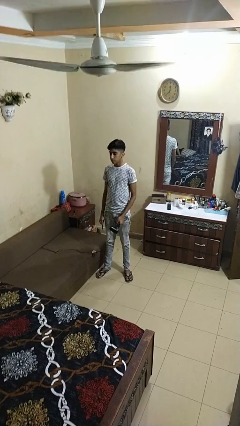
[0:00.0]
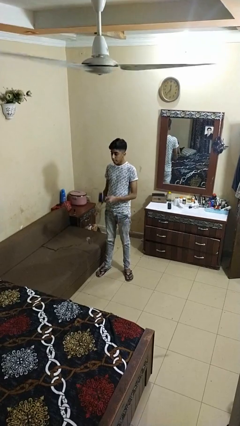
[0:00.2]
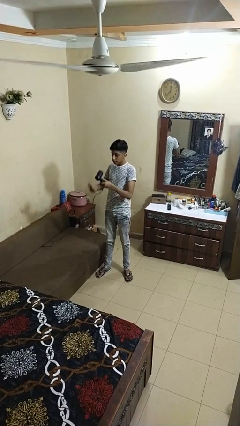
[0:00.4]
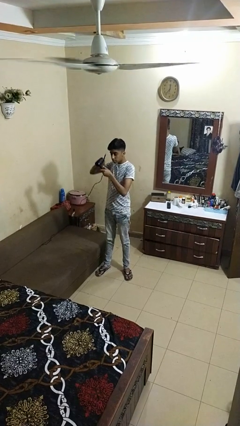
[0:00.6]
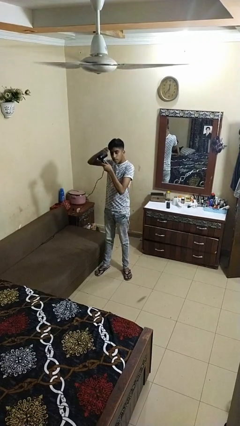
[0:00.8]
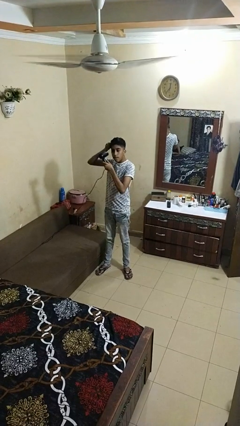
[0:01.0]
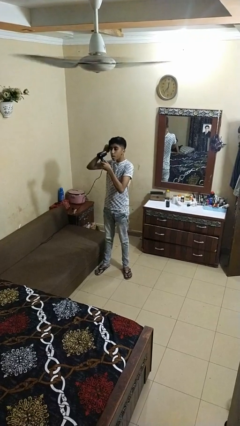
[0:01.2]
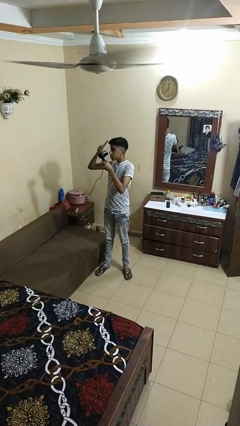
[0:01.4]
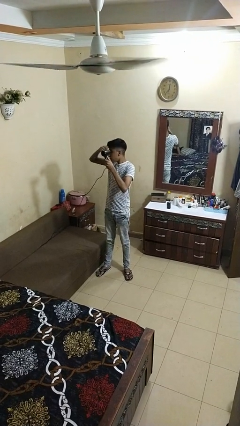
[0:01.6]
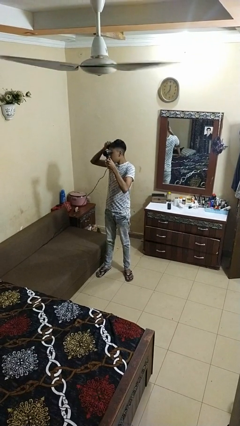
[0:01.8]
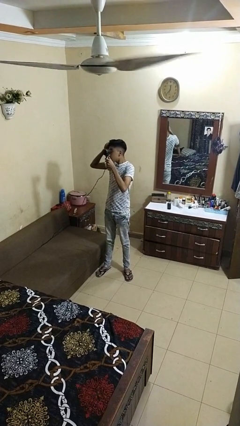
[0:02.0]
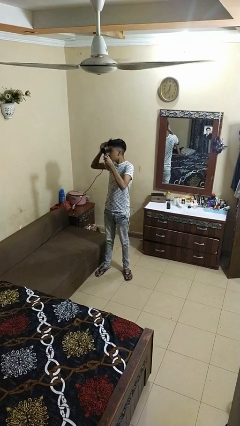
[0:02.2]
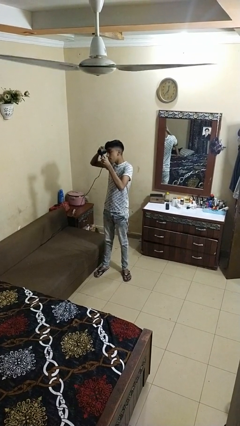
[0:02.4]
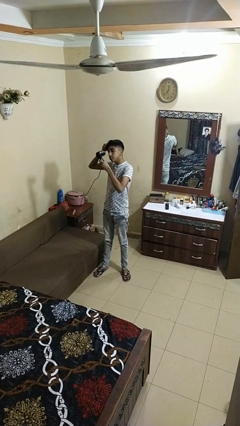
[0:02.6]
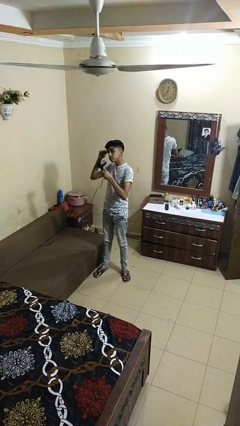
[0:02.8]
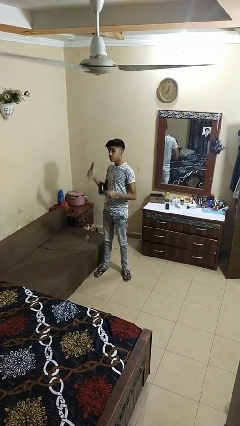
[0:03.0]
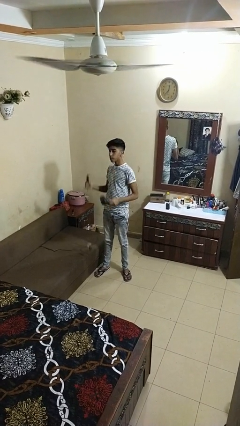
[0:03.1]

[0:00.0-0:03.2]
person dries hair with hairdryer

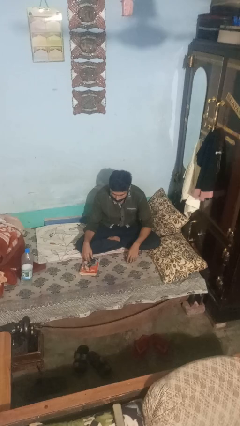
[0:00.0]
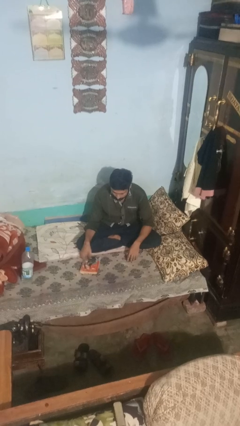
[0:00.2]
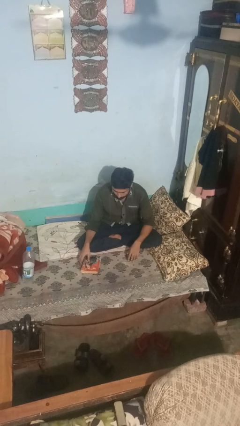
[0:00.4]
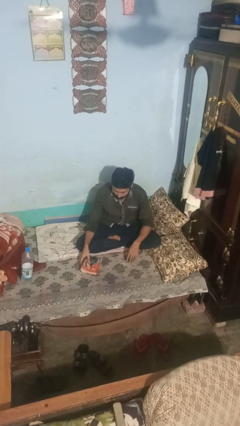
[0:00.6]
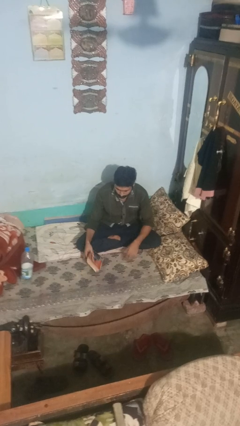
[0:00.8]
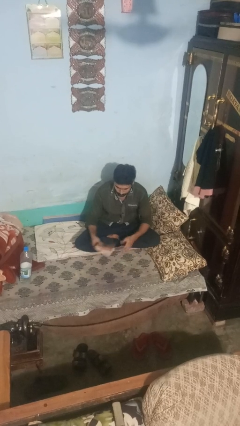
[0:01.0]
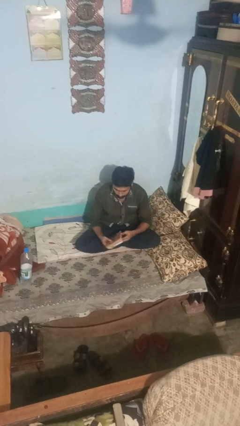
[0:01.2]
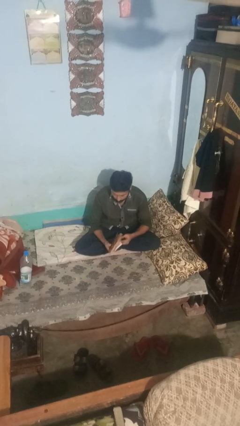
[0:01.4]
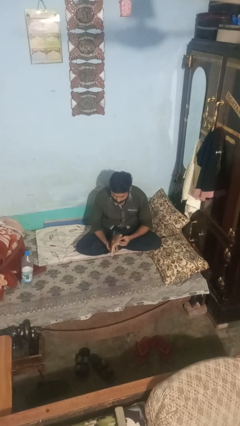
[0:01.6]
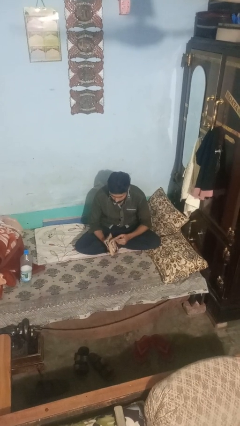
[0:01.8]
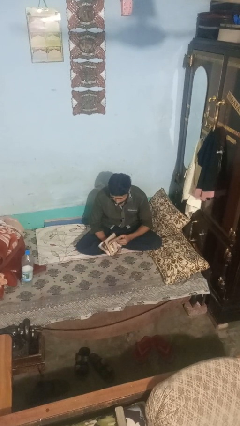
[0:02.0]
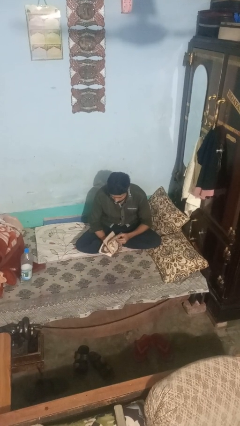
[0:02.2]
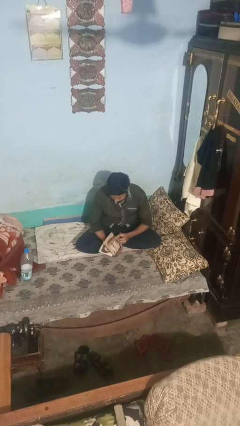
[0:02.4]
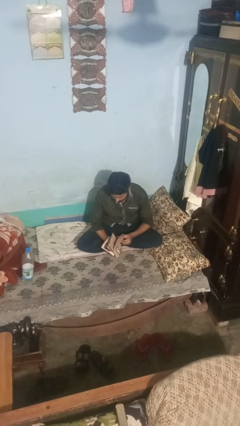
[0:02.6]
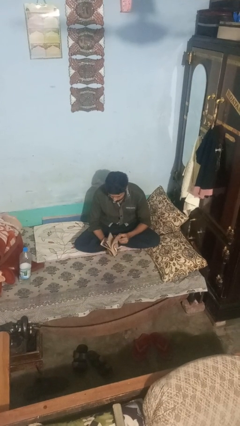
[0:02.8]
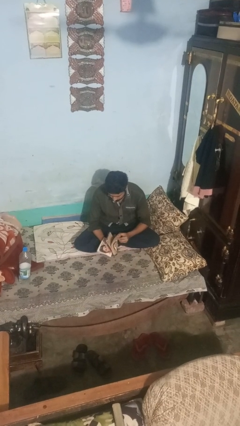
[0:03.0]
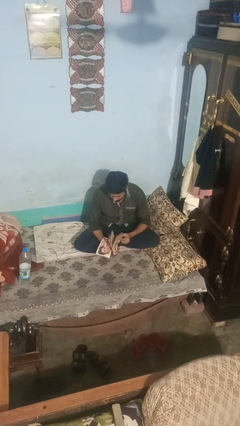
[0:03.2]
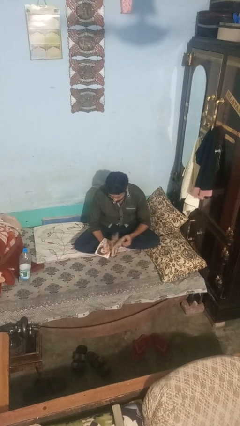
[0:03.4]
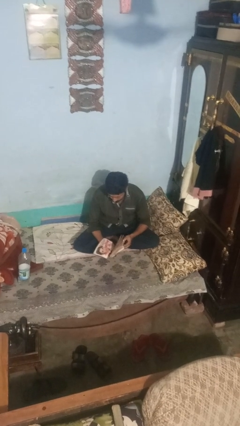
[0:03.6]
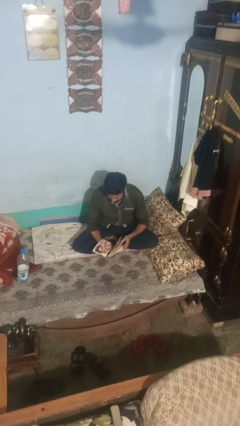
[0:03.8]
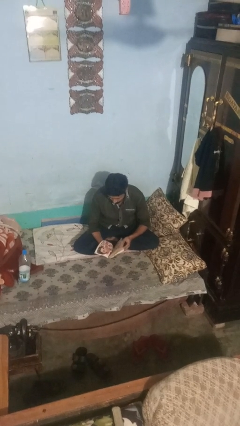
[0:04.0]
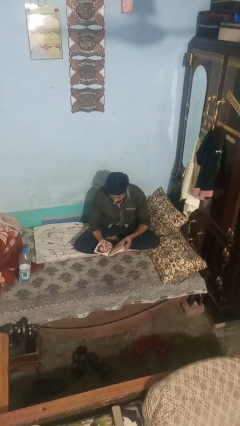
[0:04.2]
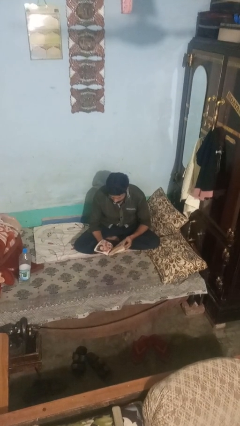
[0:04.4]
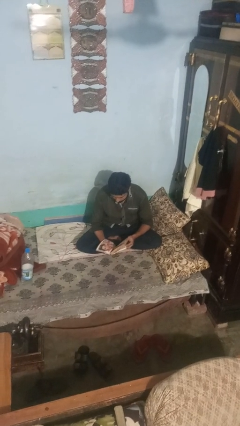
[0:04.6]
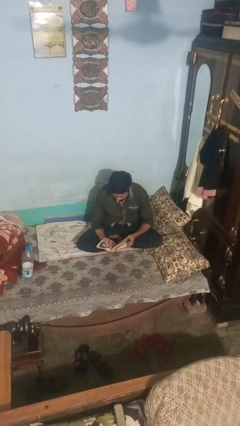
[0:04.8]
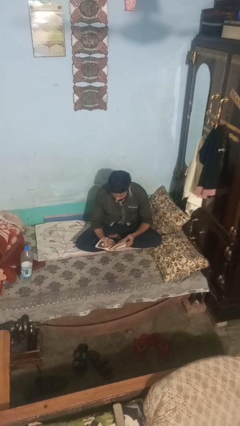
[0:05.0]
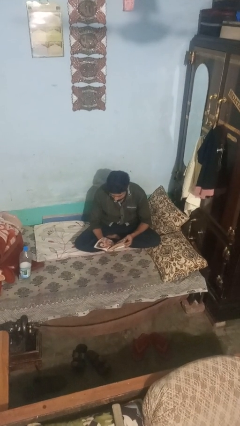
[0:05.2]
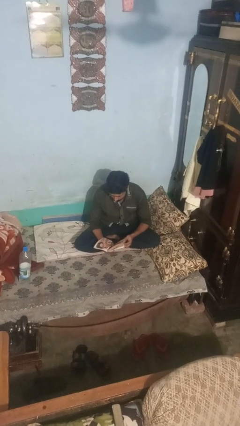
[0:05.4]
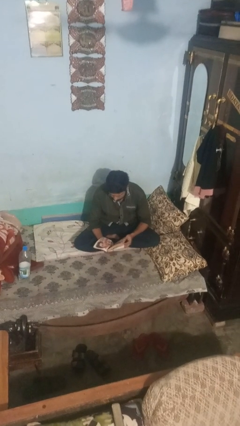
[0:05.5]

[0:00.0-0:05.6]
person reads magazine

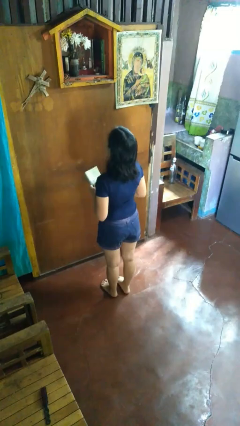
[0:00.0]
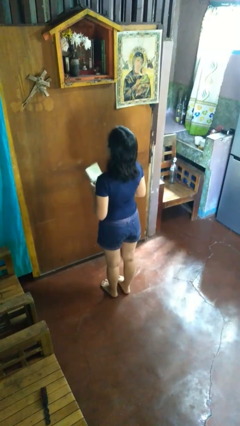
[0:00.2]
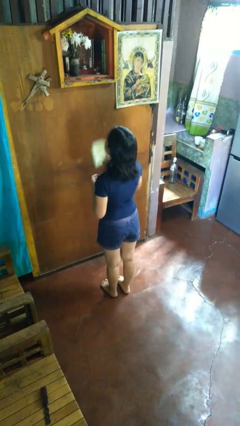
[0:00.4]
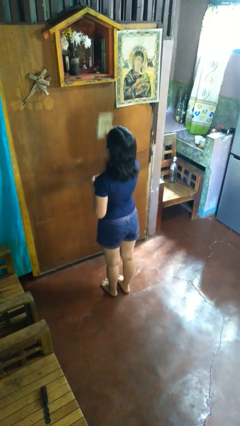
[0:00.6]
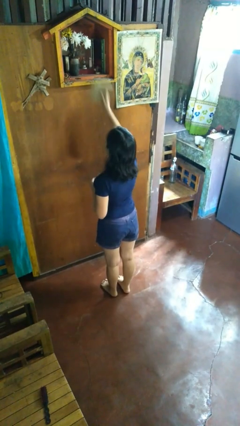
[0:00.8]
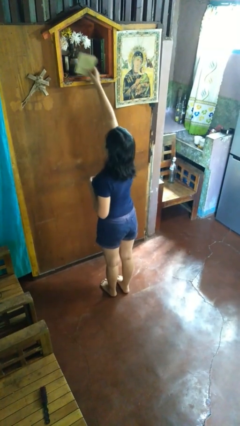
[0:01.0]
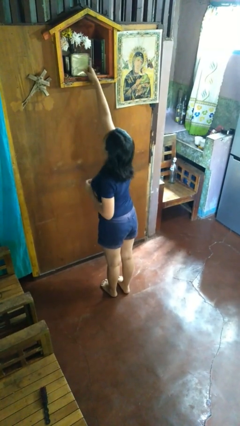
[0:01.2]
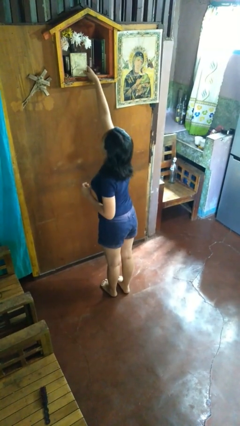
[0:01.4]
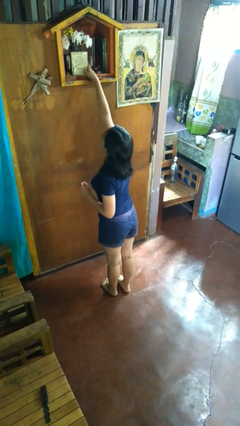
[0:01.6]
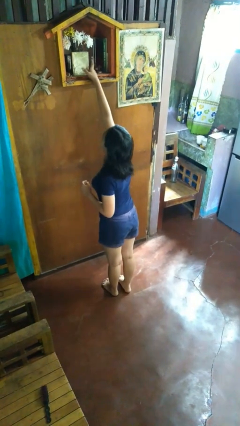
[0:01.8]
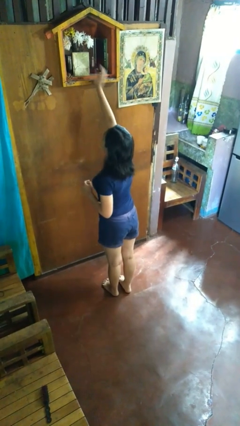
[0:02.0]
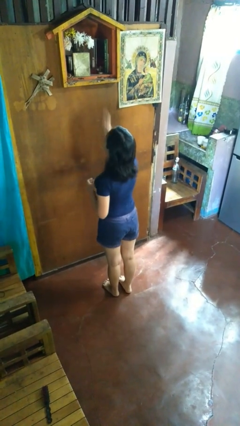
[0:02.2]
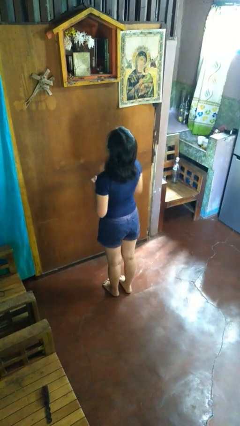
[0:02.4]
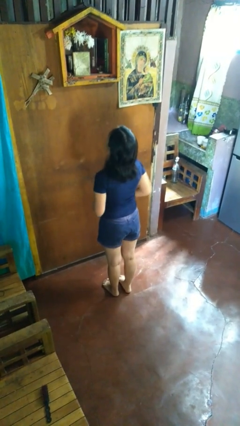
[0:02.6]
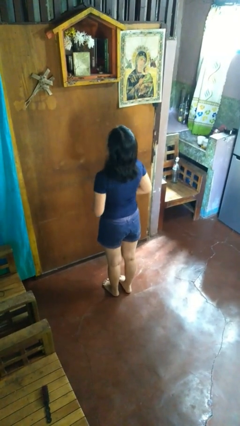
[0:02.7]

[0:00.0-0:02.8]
person puts down object on shelf

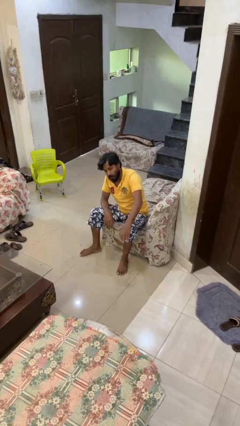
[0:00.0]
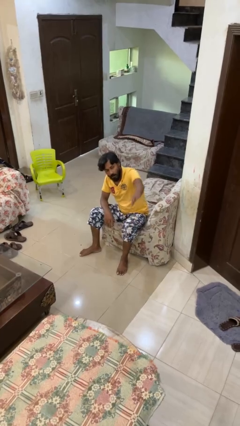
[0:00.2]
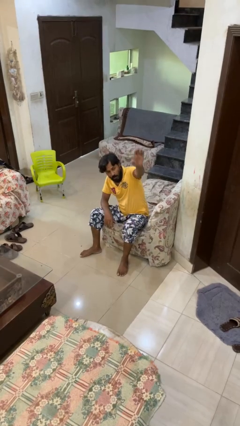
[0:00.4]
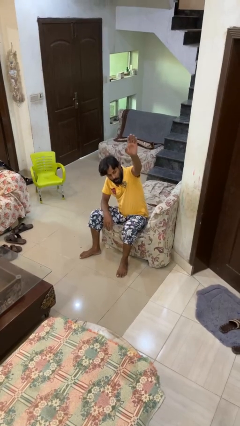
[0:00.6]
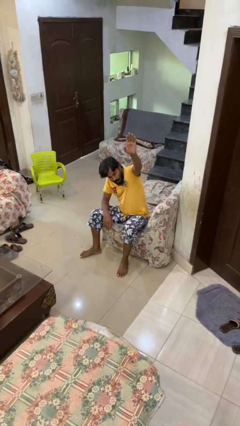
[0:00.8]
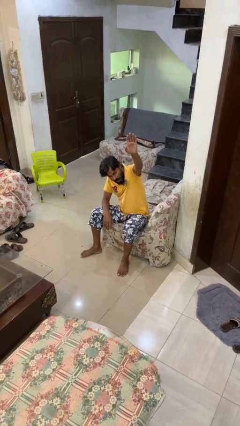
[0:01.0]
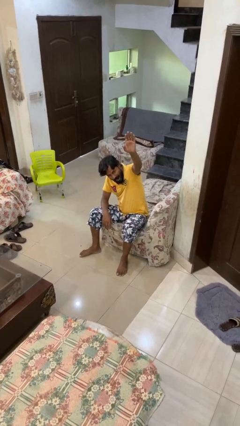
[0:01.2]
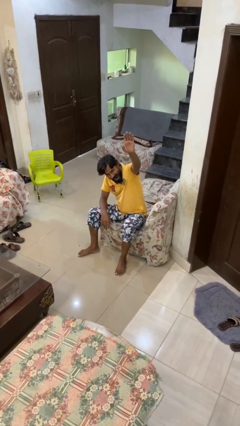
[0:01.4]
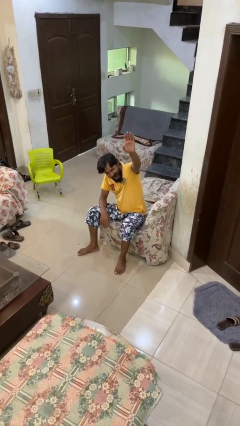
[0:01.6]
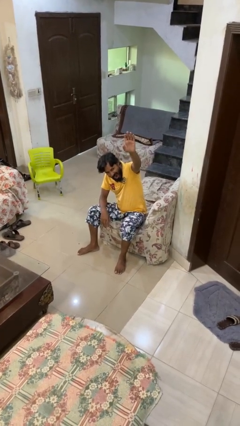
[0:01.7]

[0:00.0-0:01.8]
person gestures raise hand

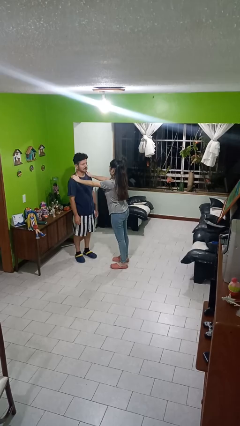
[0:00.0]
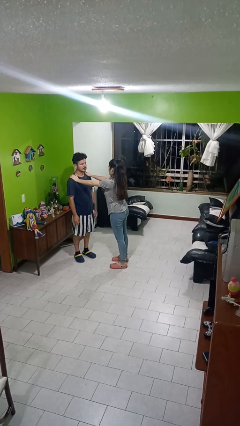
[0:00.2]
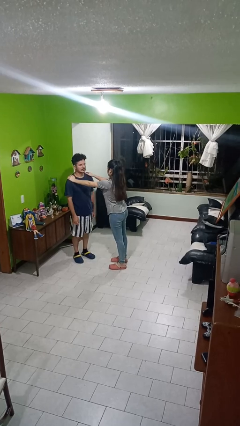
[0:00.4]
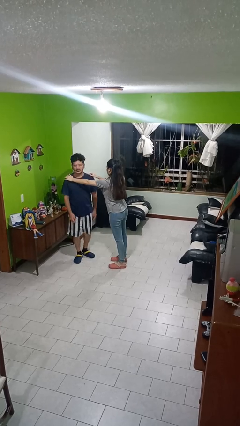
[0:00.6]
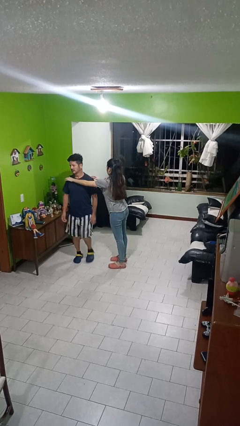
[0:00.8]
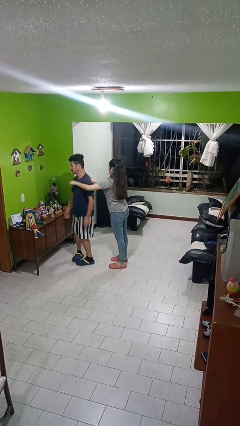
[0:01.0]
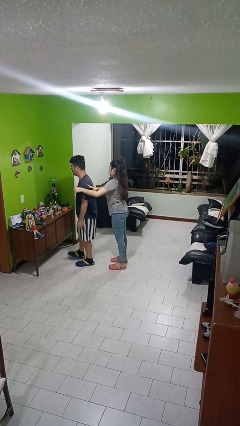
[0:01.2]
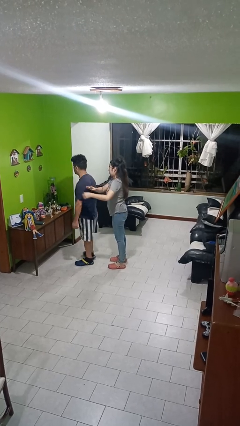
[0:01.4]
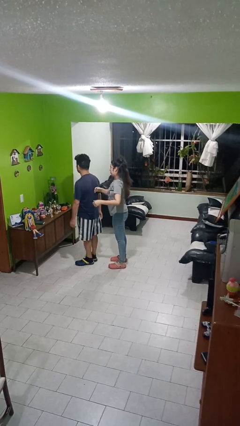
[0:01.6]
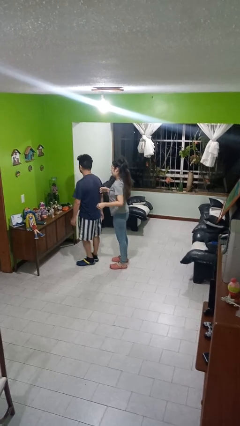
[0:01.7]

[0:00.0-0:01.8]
person spins person around

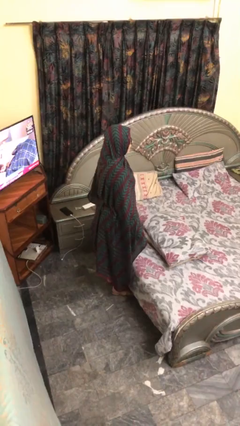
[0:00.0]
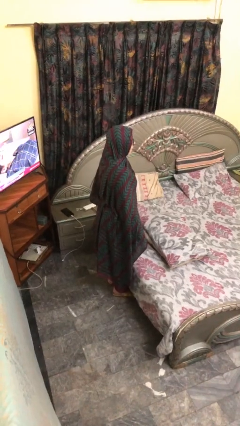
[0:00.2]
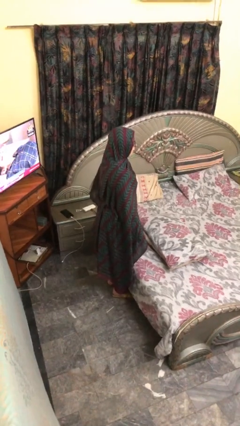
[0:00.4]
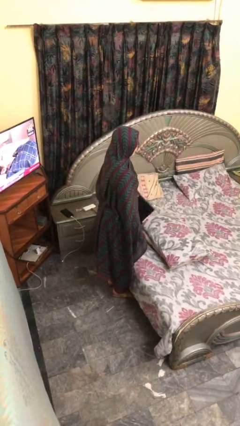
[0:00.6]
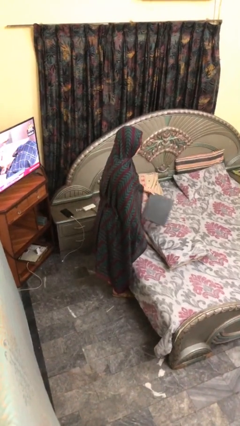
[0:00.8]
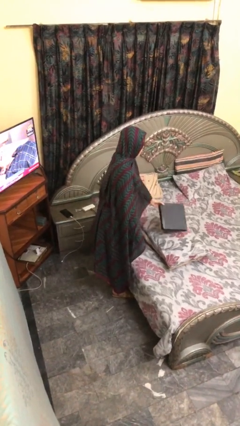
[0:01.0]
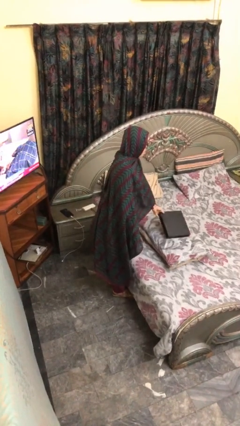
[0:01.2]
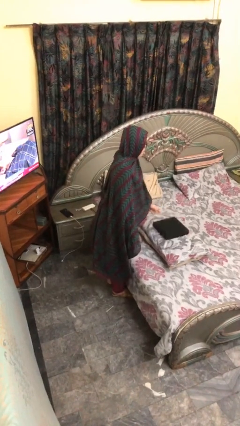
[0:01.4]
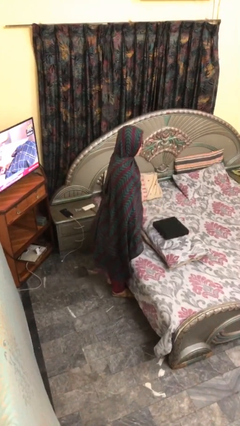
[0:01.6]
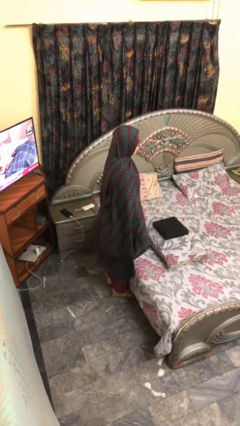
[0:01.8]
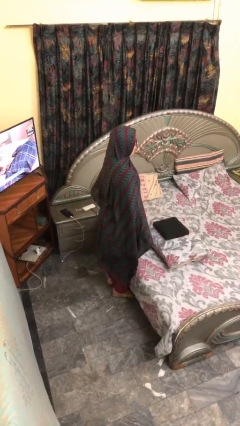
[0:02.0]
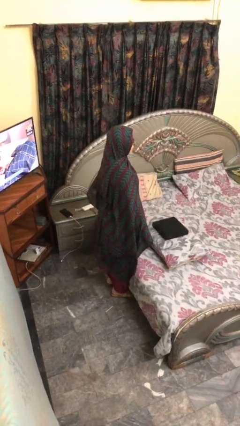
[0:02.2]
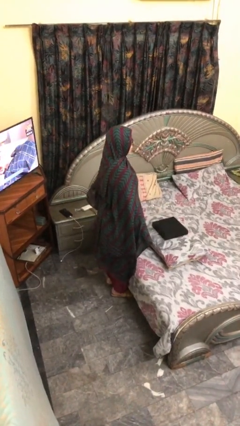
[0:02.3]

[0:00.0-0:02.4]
person puts down object on bed
